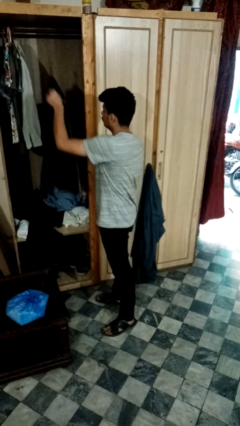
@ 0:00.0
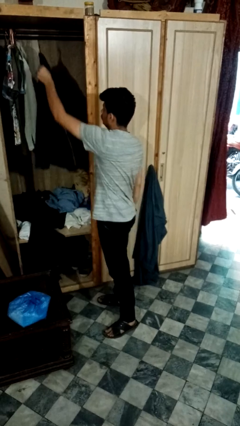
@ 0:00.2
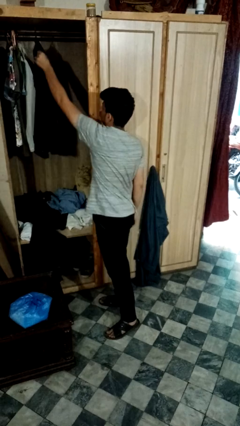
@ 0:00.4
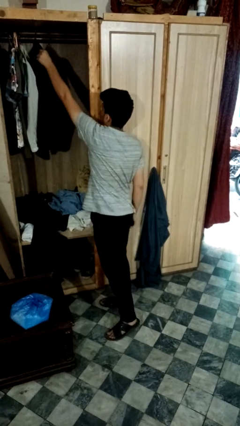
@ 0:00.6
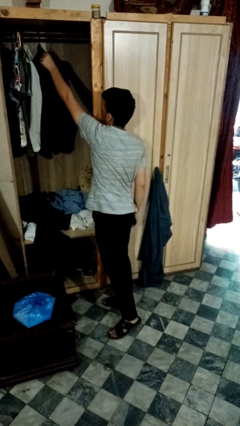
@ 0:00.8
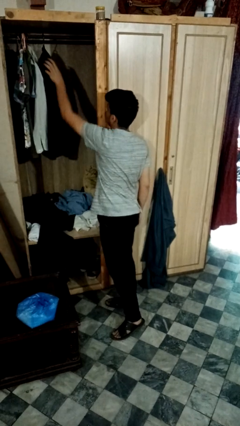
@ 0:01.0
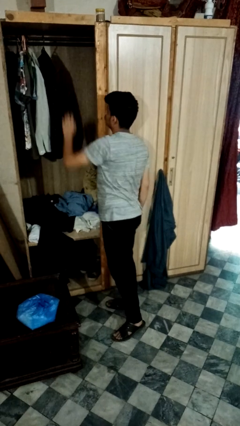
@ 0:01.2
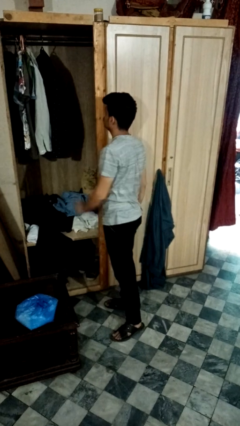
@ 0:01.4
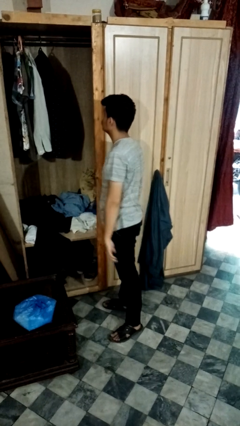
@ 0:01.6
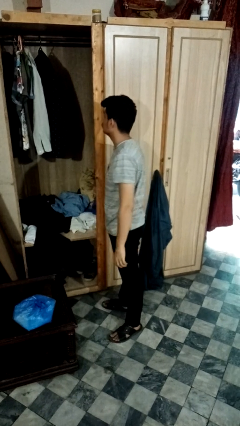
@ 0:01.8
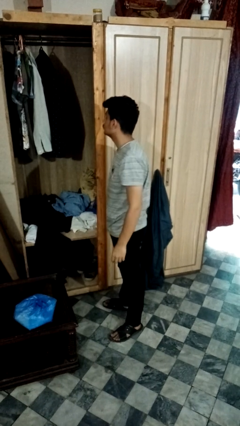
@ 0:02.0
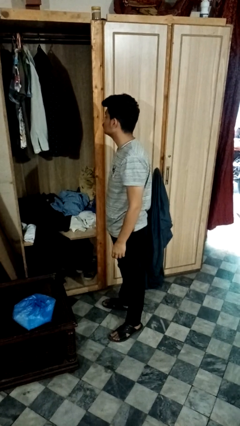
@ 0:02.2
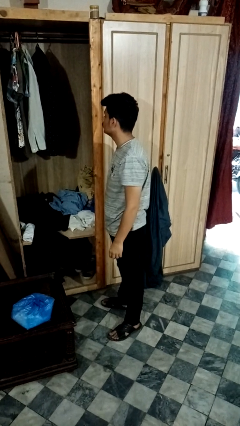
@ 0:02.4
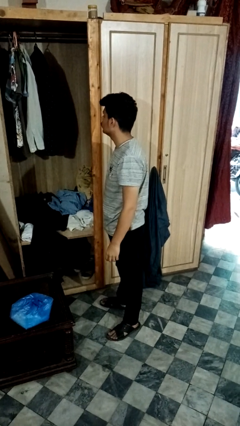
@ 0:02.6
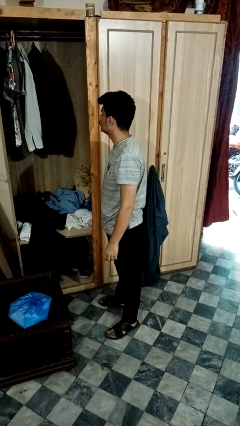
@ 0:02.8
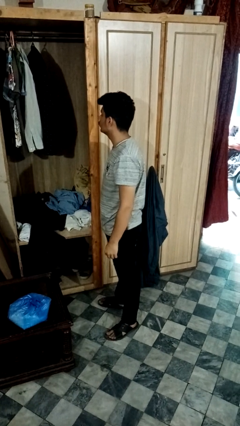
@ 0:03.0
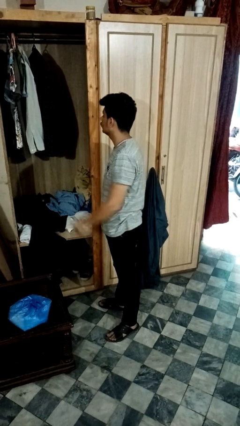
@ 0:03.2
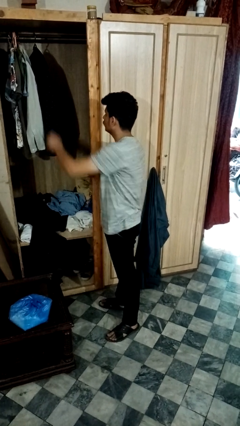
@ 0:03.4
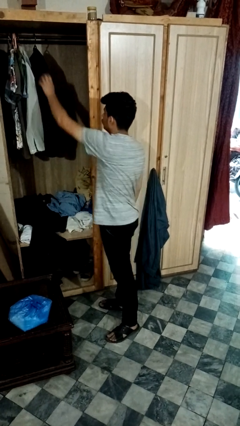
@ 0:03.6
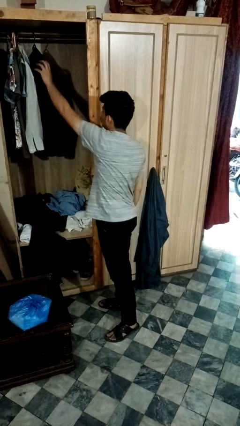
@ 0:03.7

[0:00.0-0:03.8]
person puts clothes into closet

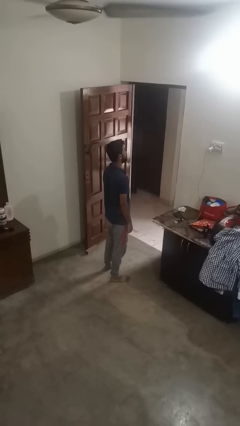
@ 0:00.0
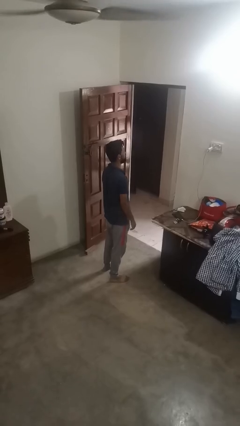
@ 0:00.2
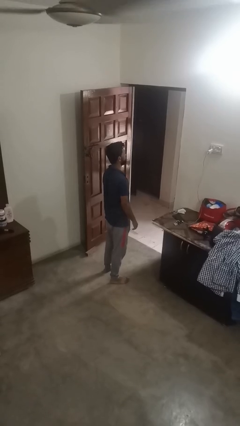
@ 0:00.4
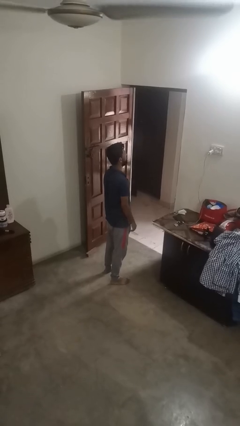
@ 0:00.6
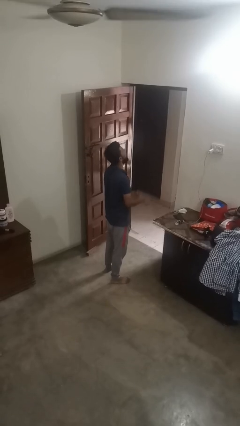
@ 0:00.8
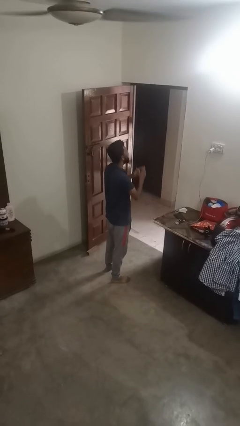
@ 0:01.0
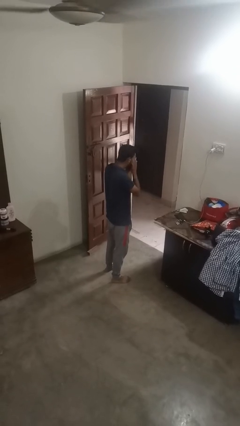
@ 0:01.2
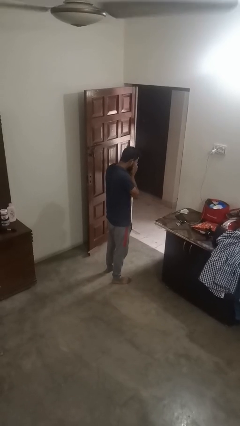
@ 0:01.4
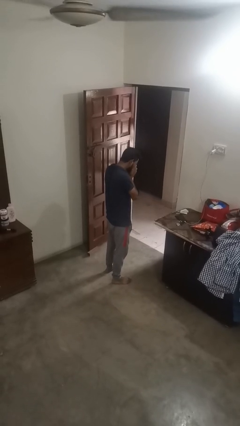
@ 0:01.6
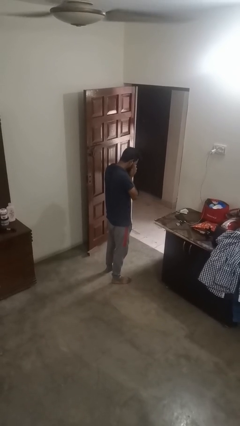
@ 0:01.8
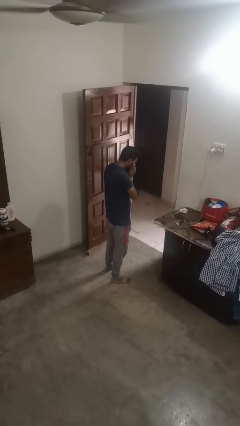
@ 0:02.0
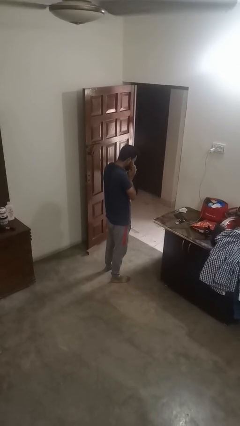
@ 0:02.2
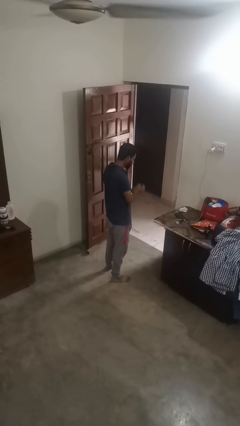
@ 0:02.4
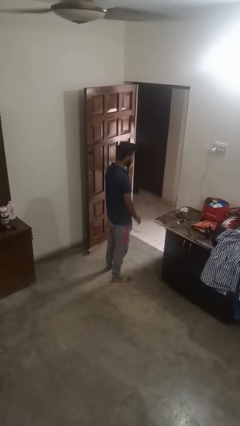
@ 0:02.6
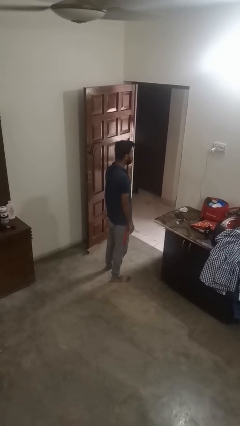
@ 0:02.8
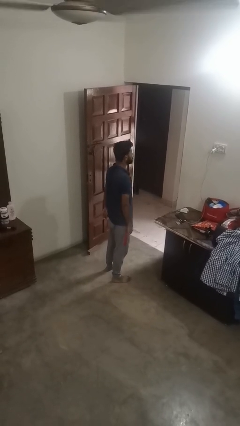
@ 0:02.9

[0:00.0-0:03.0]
person sneezes into hand

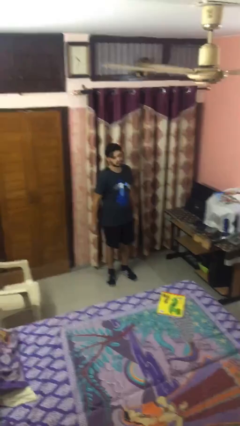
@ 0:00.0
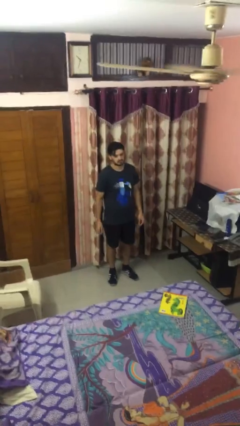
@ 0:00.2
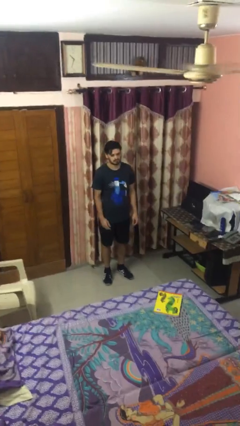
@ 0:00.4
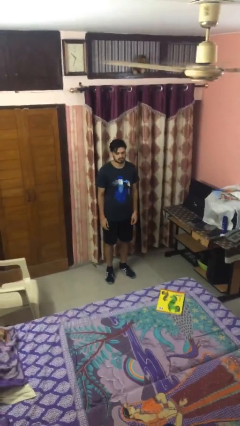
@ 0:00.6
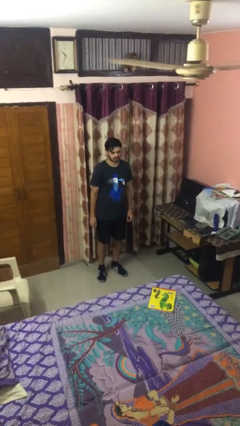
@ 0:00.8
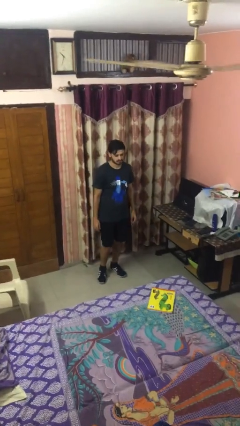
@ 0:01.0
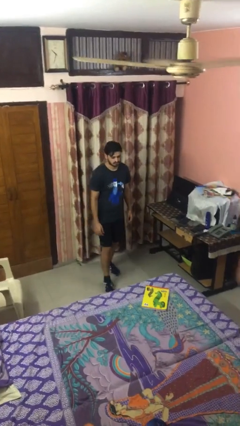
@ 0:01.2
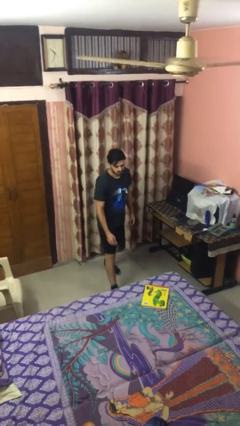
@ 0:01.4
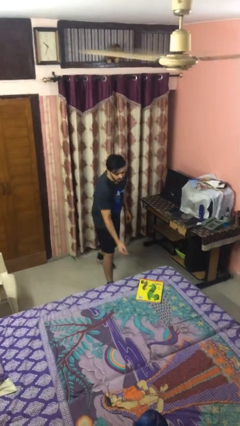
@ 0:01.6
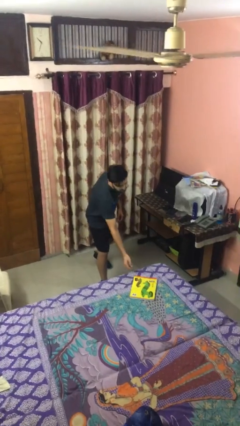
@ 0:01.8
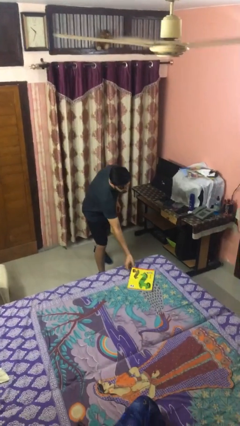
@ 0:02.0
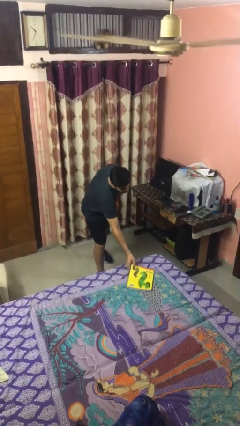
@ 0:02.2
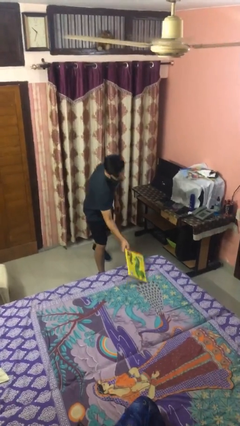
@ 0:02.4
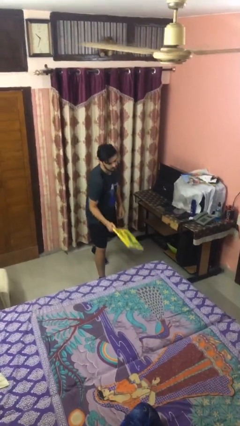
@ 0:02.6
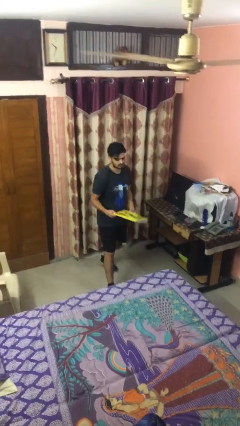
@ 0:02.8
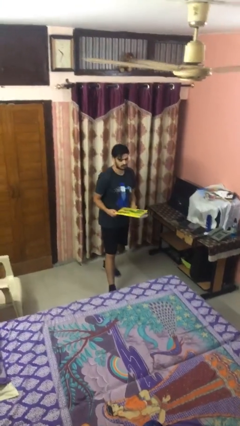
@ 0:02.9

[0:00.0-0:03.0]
person picks up object from bed

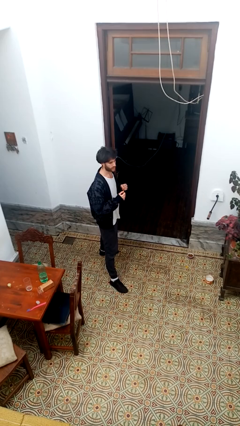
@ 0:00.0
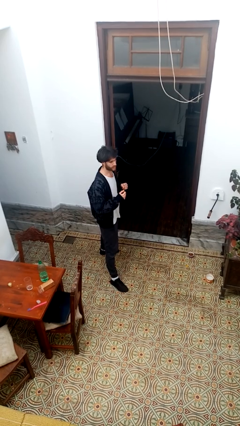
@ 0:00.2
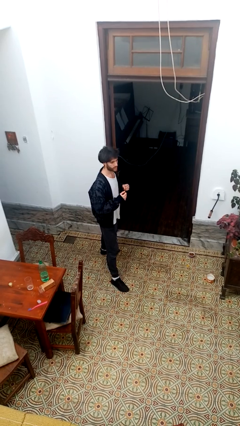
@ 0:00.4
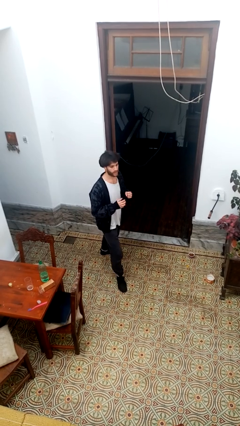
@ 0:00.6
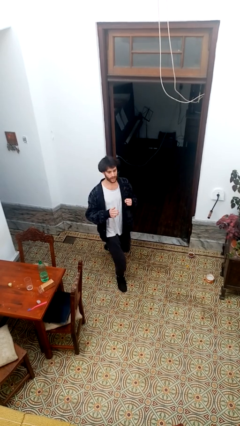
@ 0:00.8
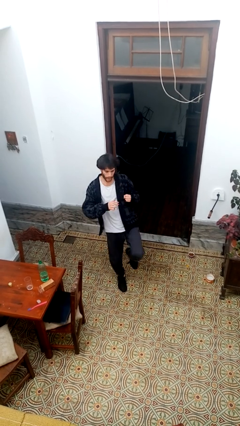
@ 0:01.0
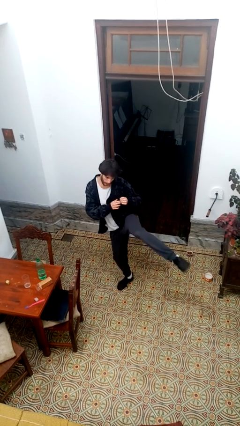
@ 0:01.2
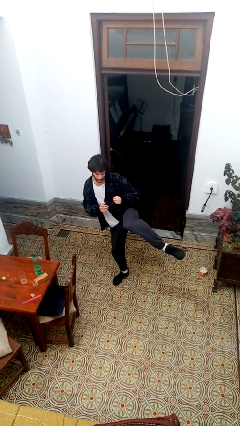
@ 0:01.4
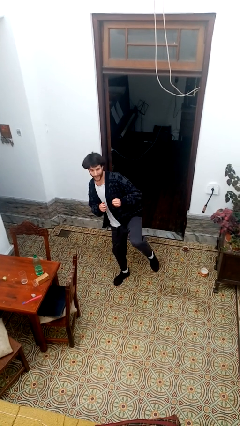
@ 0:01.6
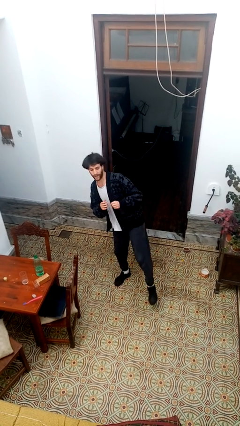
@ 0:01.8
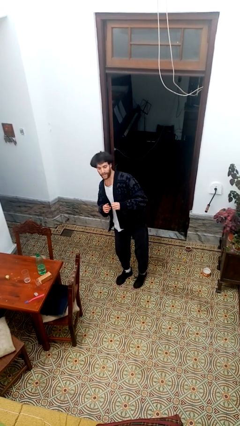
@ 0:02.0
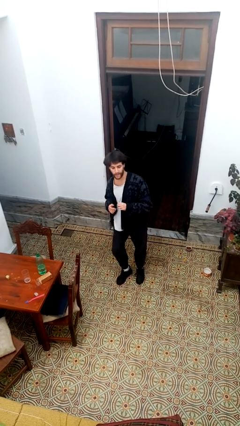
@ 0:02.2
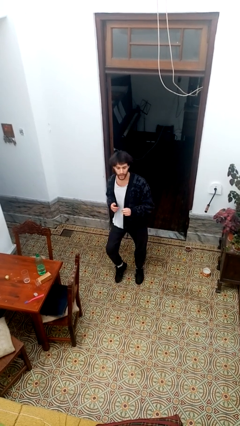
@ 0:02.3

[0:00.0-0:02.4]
person karate kicks

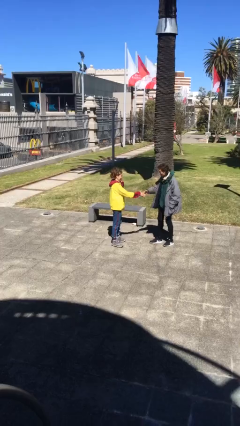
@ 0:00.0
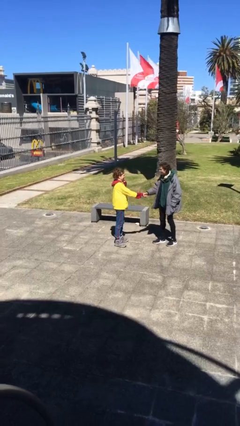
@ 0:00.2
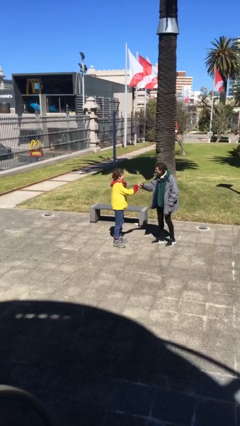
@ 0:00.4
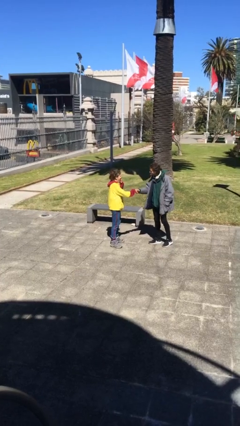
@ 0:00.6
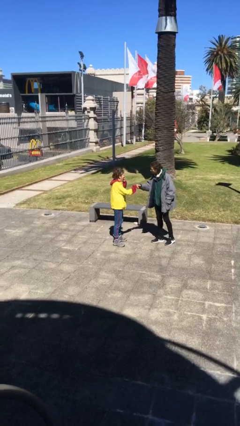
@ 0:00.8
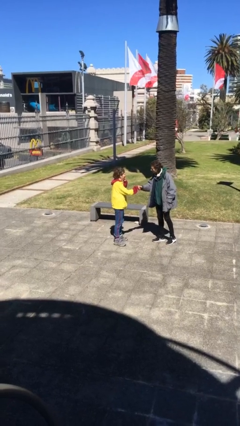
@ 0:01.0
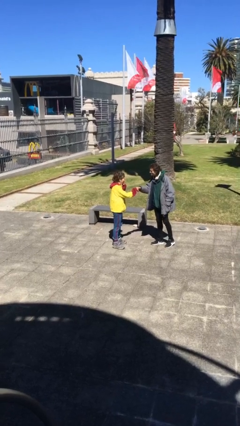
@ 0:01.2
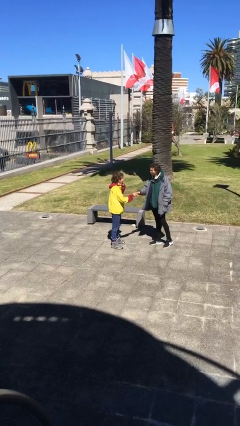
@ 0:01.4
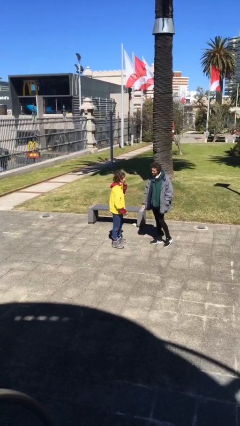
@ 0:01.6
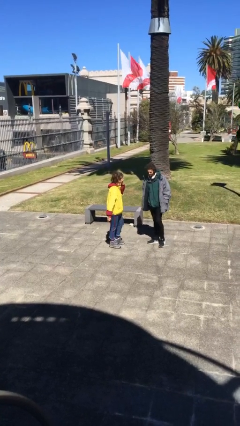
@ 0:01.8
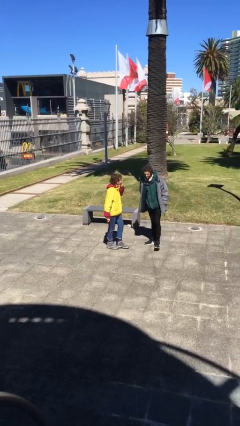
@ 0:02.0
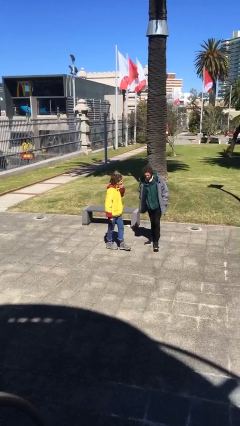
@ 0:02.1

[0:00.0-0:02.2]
person shakes hand

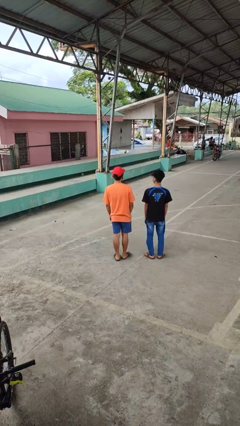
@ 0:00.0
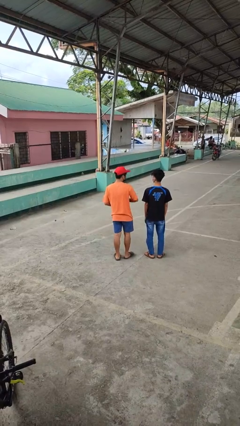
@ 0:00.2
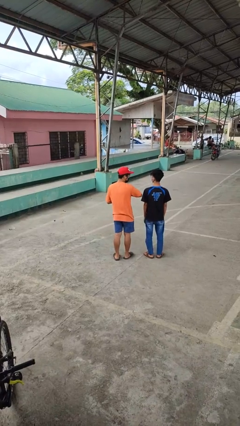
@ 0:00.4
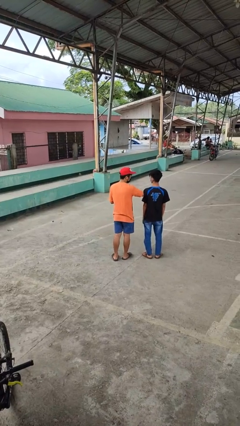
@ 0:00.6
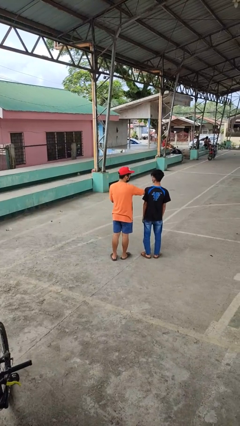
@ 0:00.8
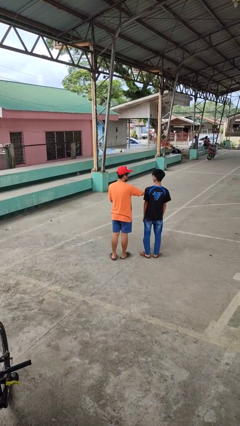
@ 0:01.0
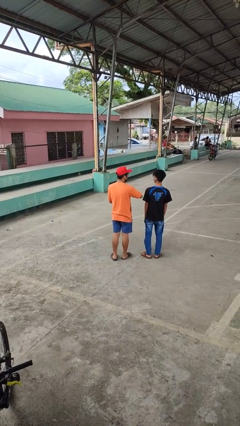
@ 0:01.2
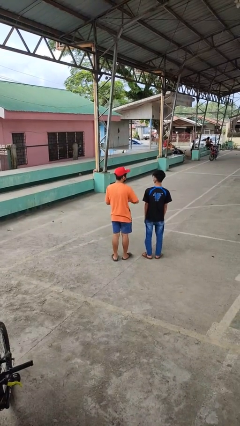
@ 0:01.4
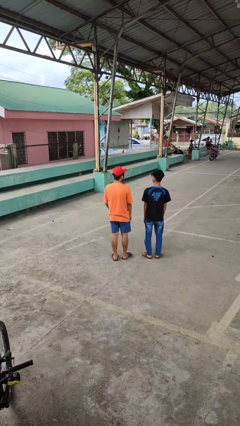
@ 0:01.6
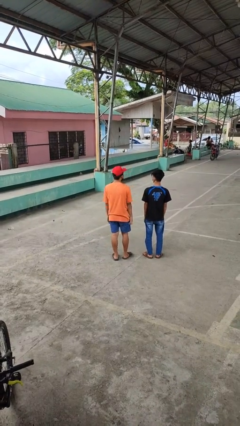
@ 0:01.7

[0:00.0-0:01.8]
person nudges person with elbow

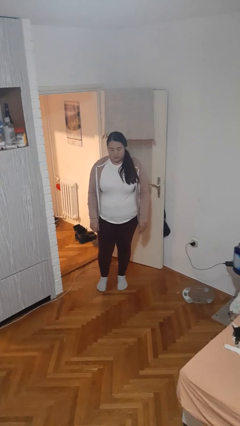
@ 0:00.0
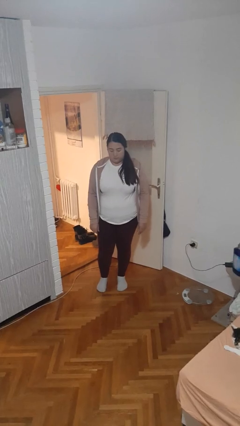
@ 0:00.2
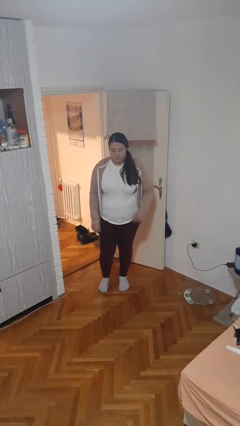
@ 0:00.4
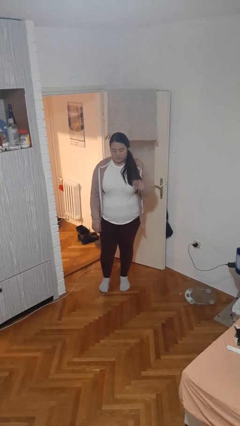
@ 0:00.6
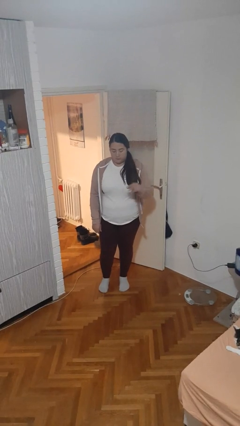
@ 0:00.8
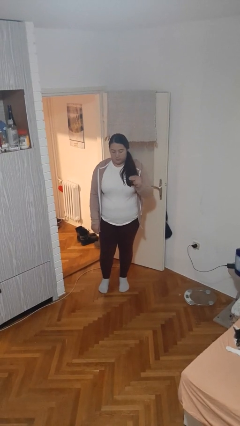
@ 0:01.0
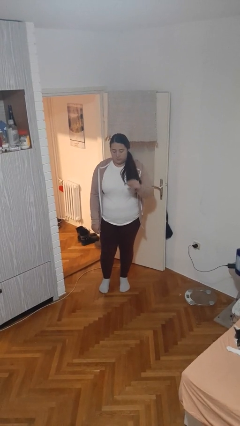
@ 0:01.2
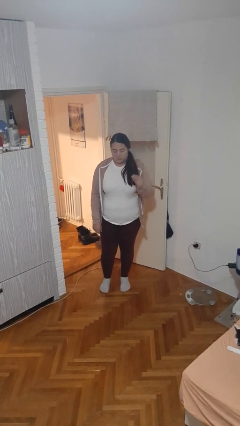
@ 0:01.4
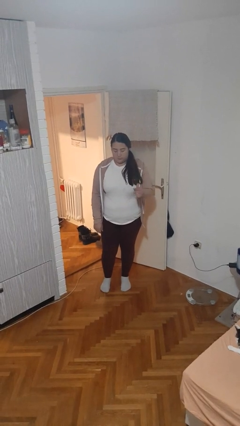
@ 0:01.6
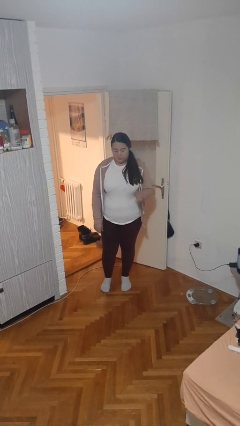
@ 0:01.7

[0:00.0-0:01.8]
person snaps fingers
